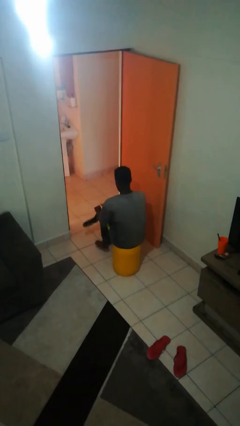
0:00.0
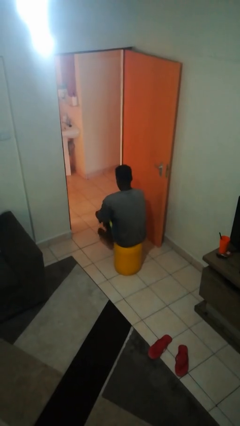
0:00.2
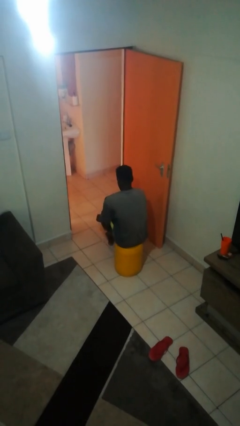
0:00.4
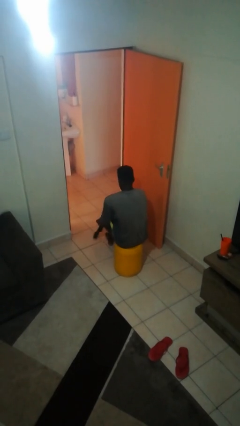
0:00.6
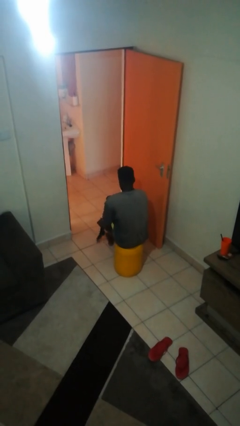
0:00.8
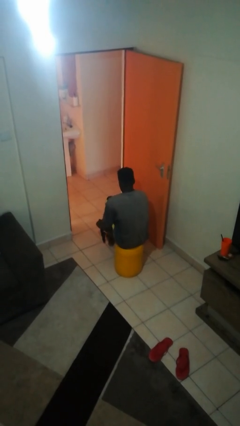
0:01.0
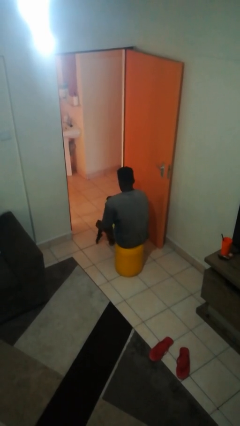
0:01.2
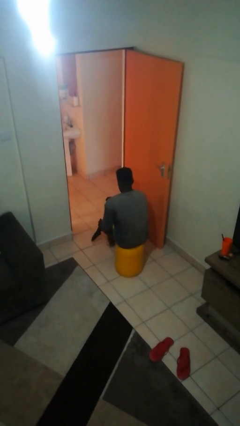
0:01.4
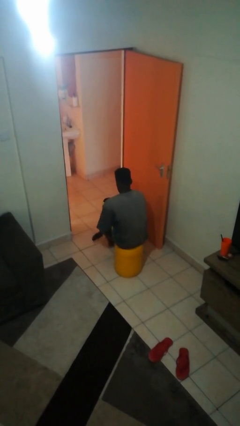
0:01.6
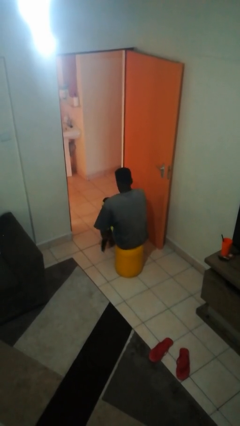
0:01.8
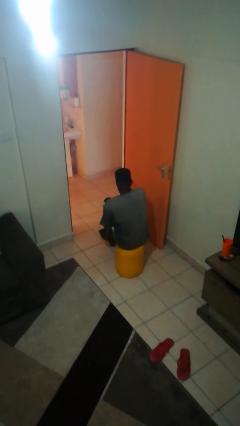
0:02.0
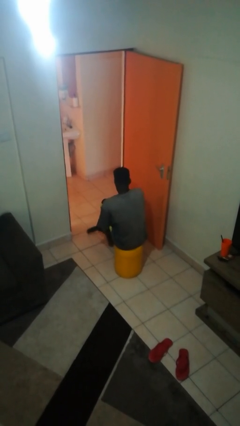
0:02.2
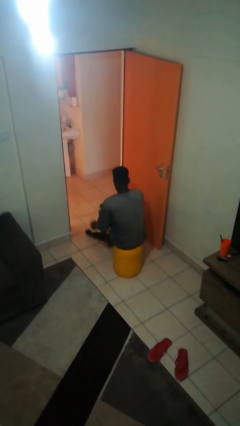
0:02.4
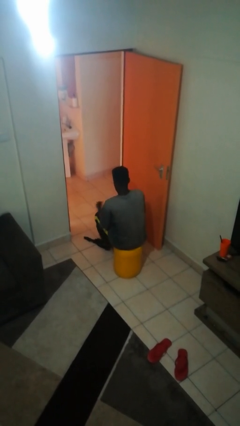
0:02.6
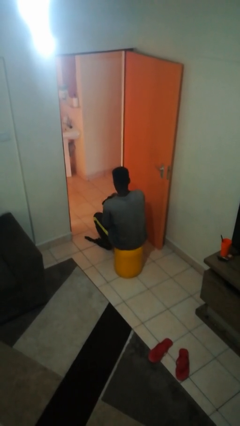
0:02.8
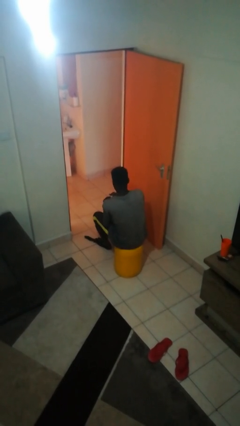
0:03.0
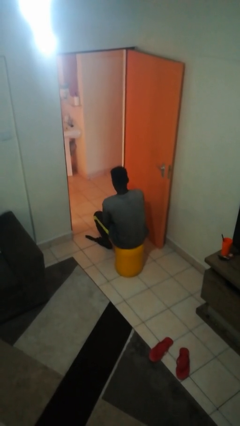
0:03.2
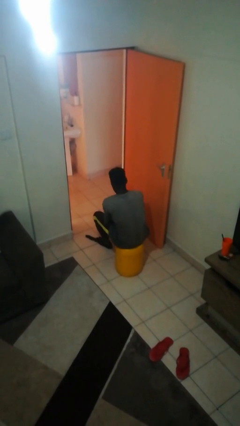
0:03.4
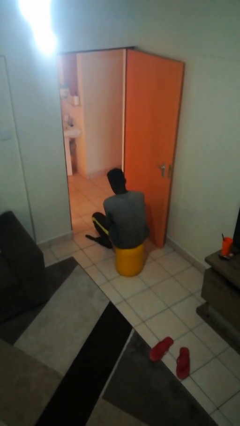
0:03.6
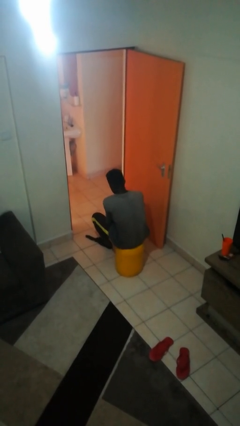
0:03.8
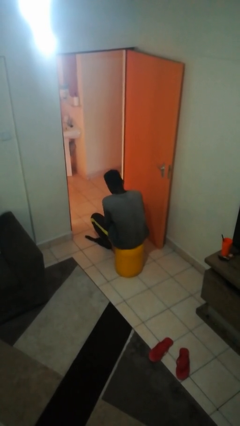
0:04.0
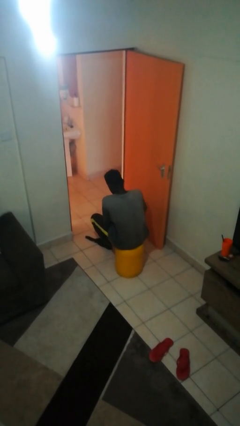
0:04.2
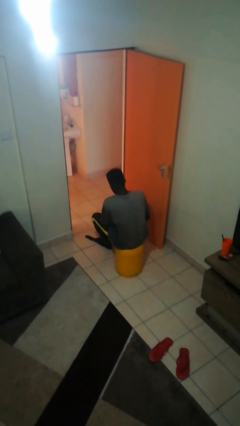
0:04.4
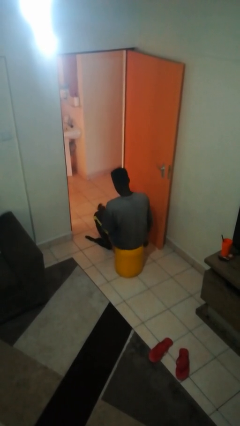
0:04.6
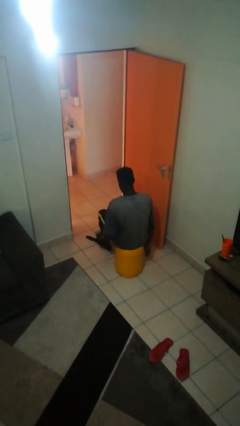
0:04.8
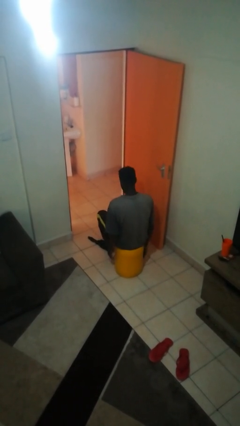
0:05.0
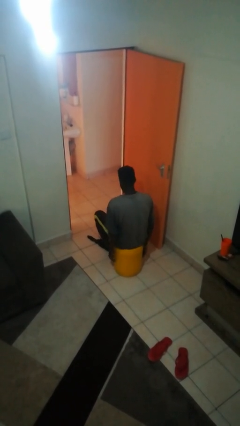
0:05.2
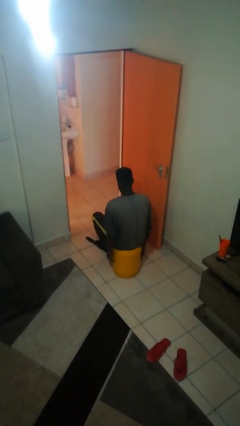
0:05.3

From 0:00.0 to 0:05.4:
person puts on socks

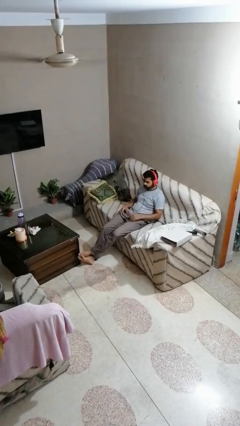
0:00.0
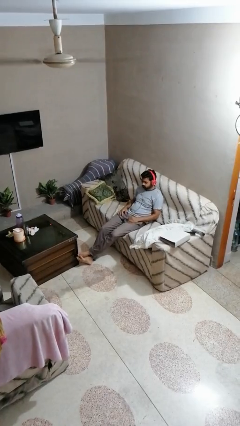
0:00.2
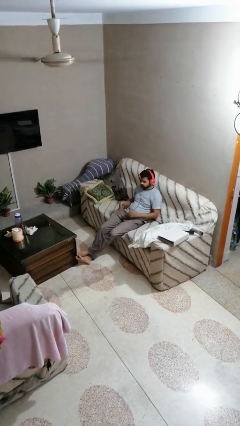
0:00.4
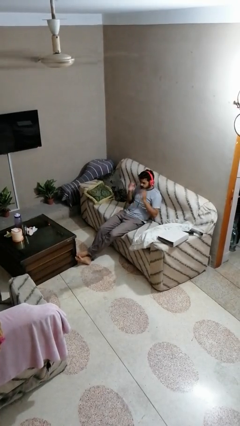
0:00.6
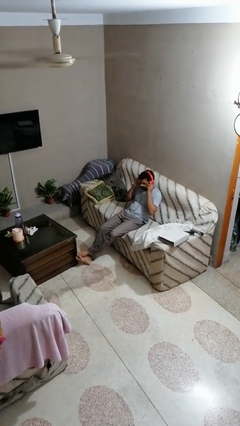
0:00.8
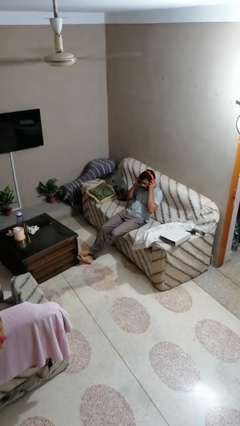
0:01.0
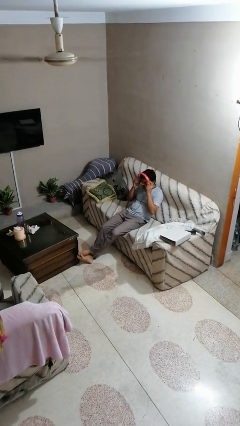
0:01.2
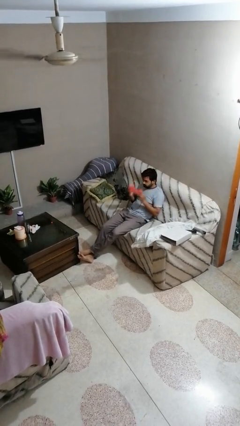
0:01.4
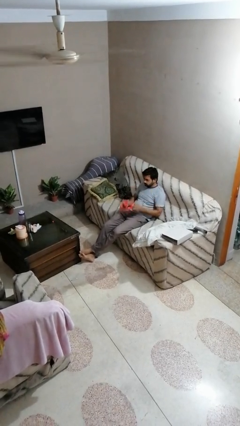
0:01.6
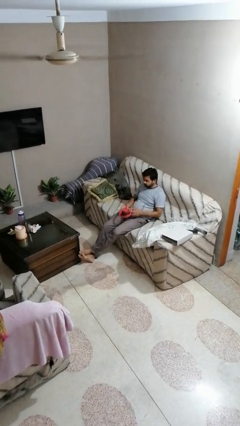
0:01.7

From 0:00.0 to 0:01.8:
person takes off headphones

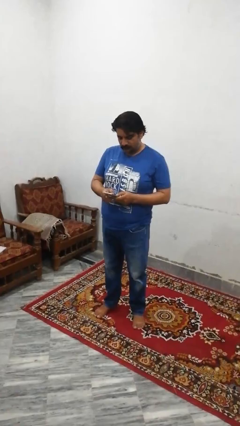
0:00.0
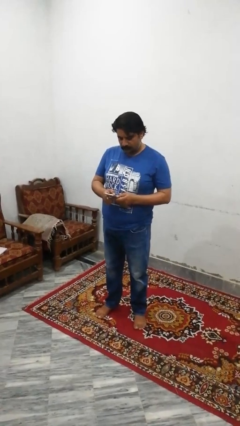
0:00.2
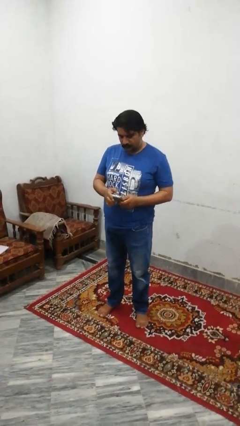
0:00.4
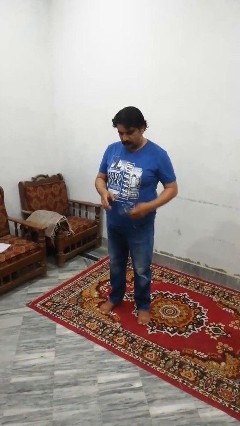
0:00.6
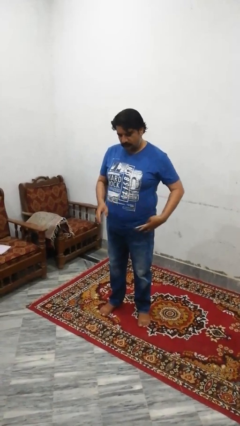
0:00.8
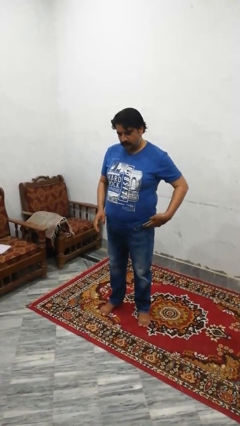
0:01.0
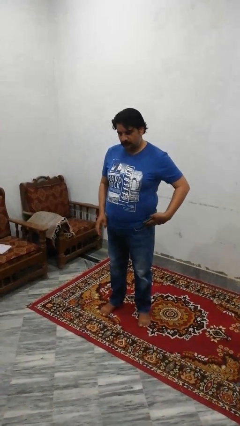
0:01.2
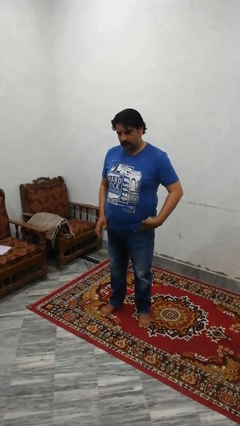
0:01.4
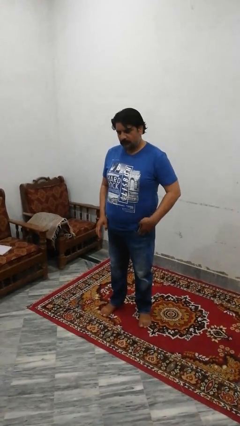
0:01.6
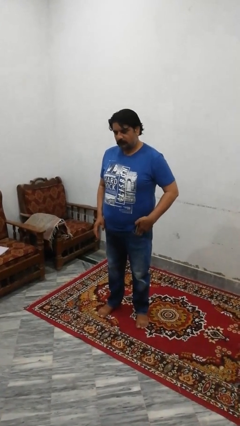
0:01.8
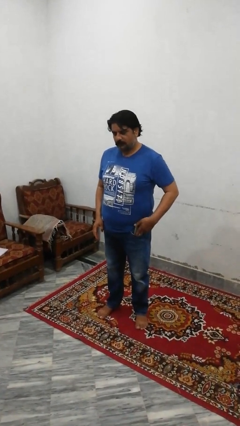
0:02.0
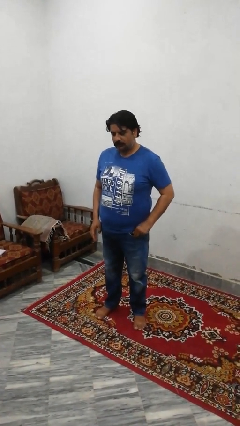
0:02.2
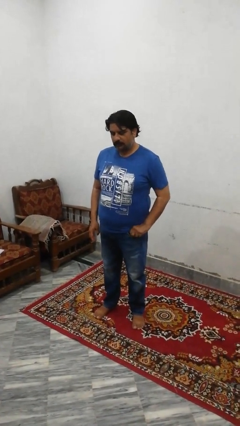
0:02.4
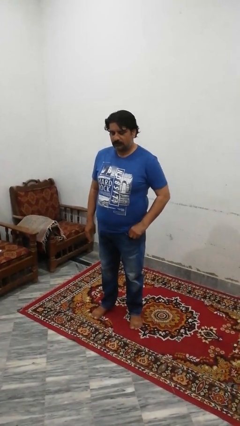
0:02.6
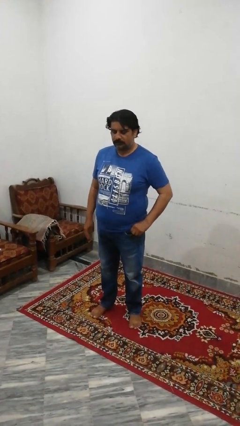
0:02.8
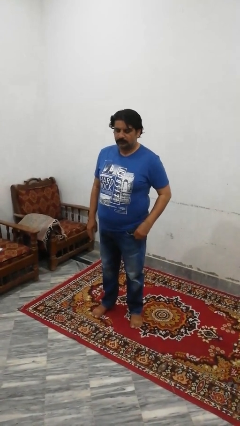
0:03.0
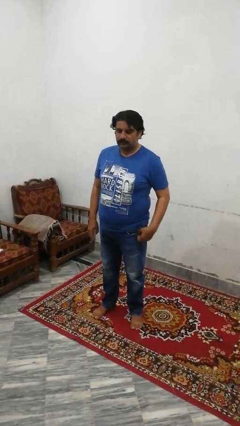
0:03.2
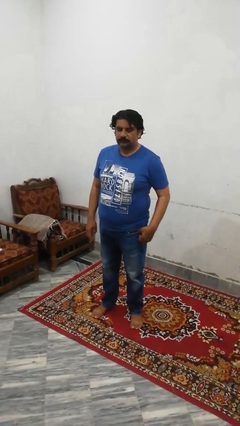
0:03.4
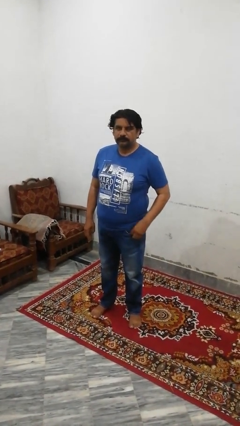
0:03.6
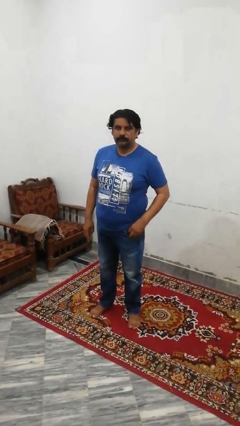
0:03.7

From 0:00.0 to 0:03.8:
person puts phone into pocket

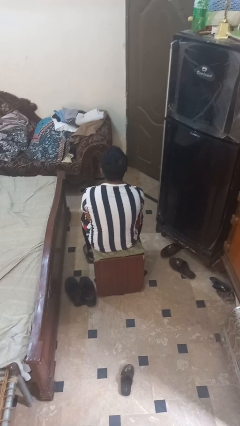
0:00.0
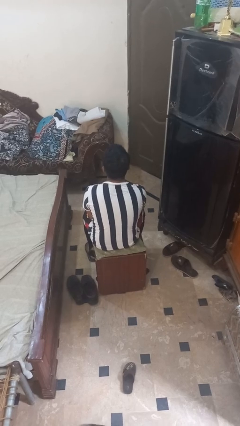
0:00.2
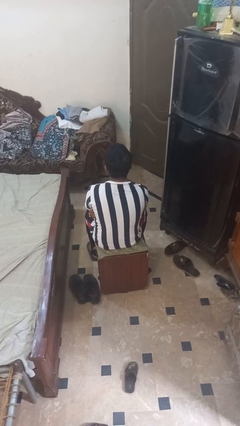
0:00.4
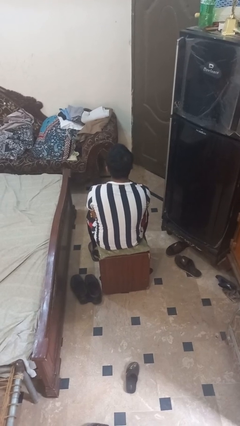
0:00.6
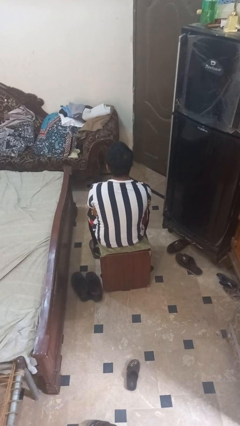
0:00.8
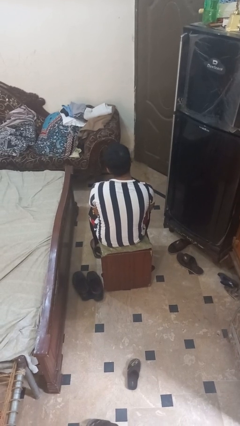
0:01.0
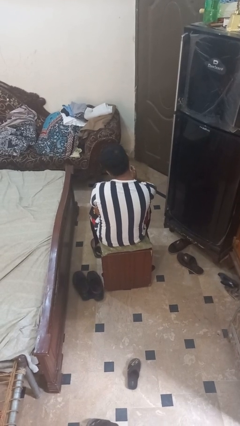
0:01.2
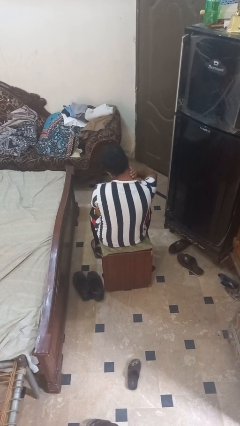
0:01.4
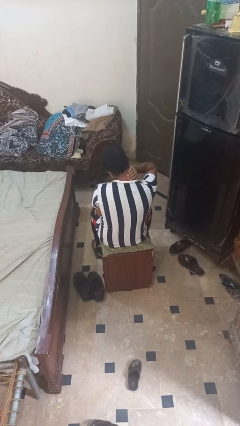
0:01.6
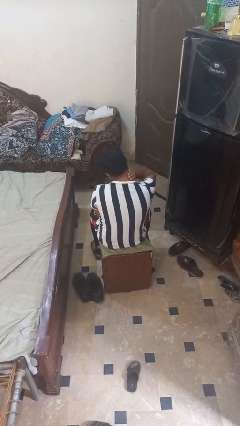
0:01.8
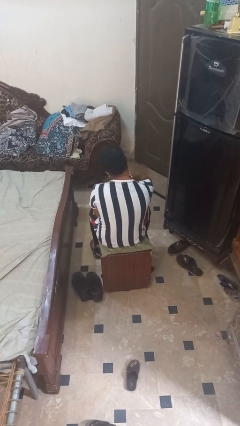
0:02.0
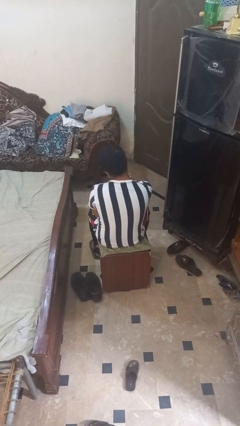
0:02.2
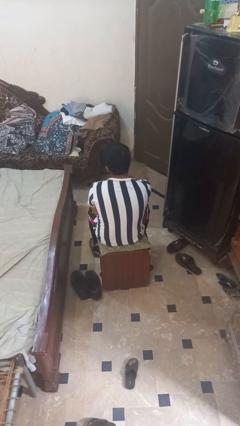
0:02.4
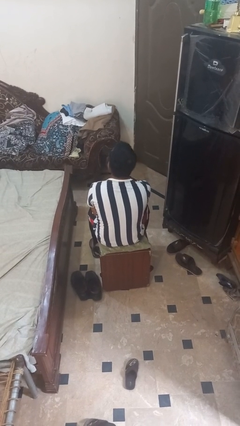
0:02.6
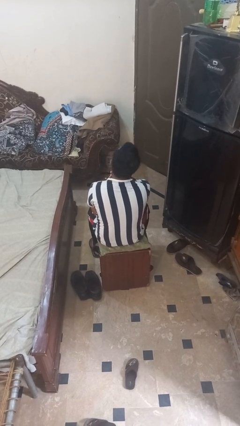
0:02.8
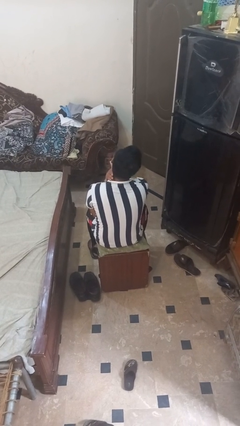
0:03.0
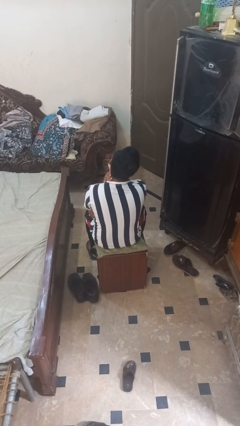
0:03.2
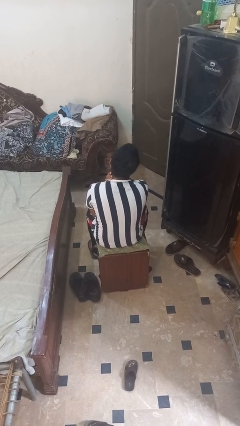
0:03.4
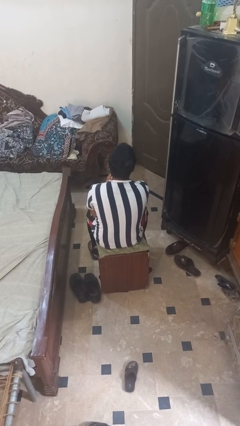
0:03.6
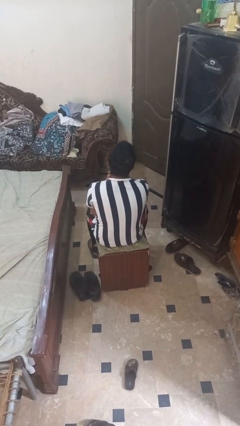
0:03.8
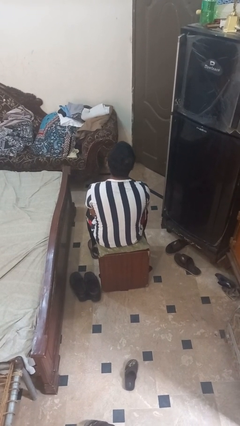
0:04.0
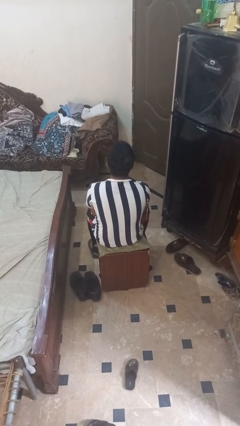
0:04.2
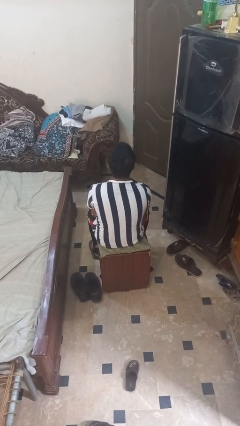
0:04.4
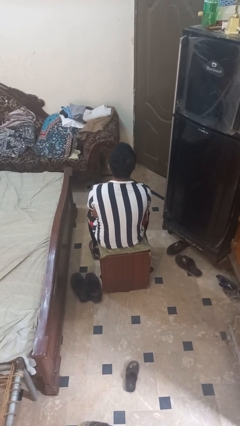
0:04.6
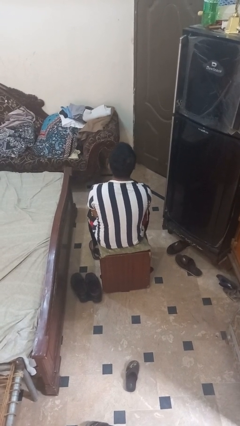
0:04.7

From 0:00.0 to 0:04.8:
person rubs neck

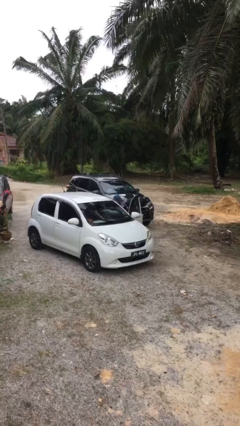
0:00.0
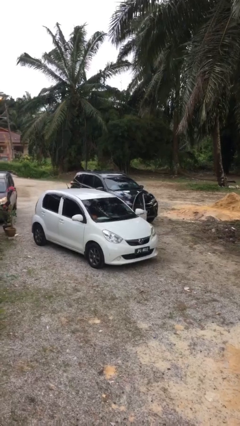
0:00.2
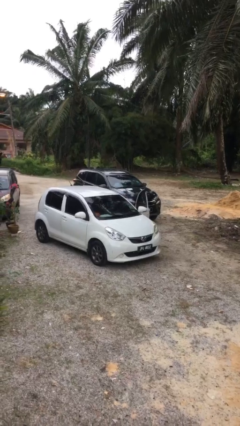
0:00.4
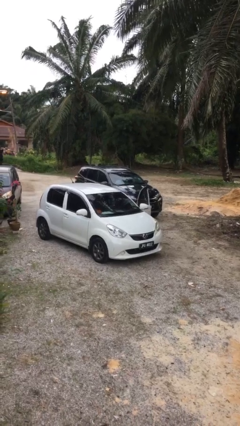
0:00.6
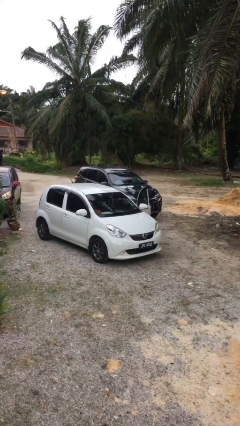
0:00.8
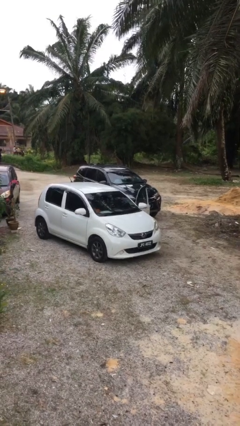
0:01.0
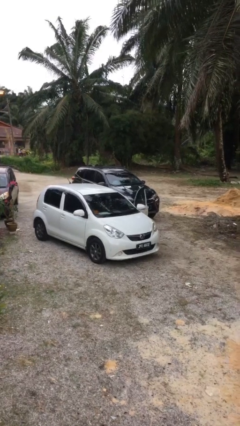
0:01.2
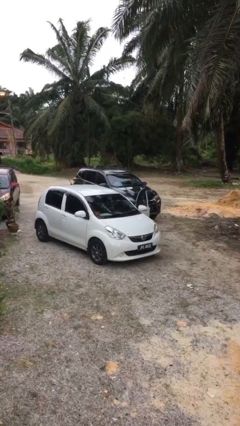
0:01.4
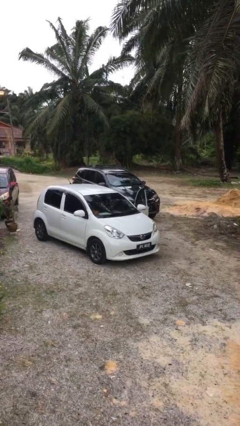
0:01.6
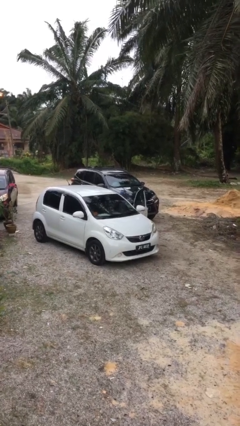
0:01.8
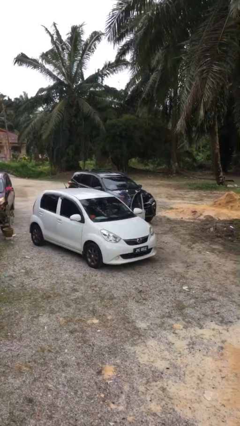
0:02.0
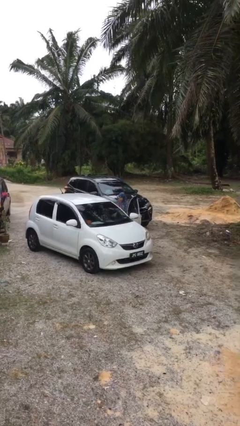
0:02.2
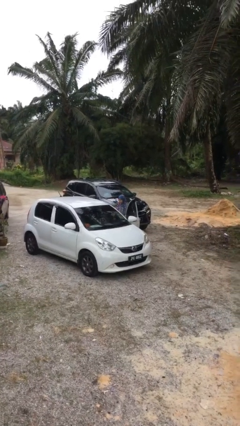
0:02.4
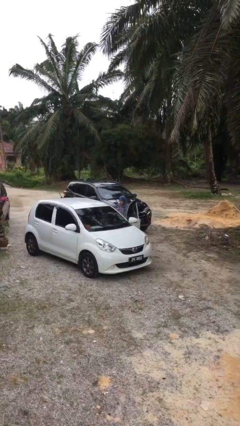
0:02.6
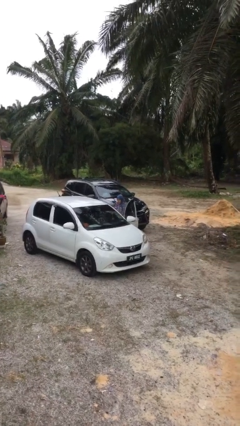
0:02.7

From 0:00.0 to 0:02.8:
person loads car
